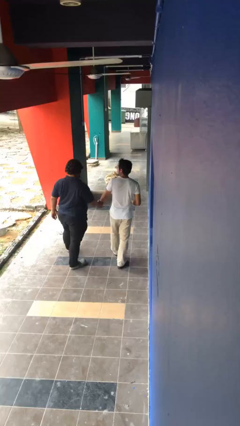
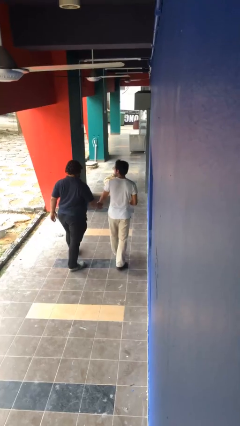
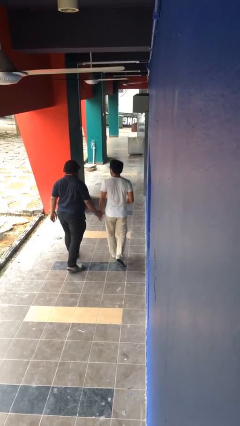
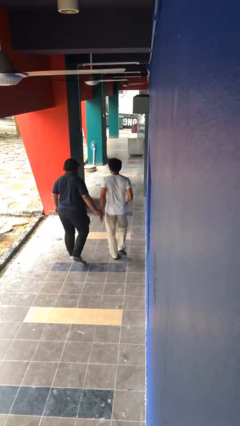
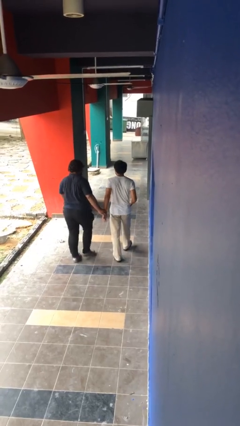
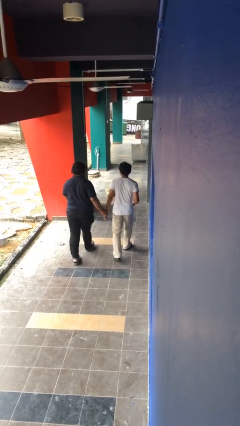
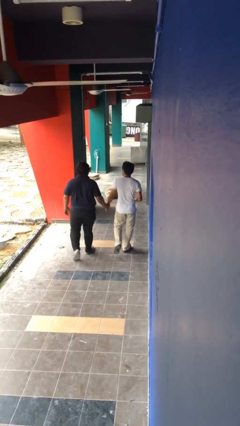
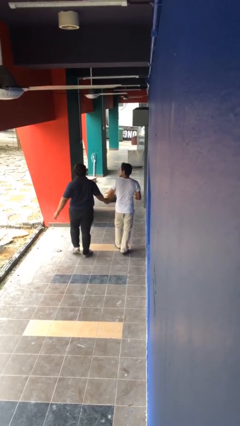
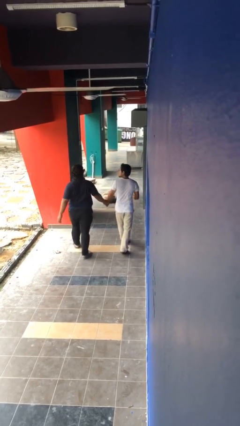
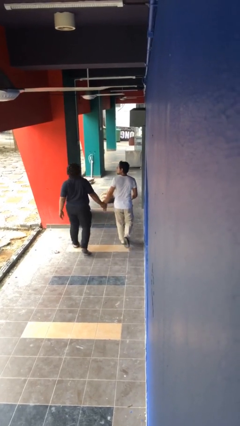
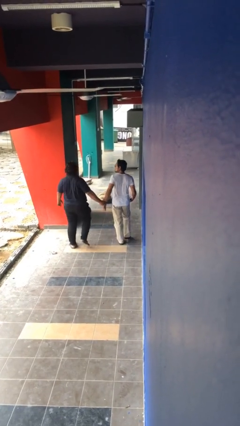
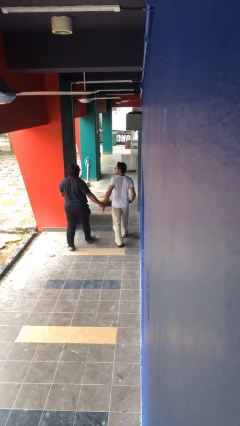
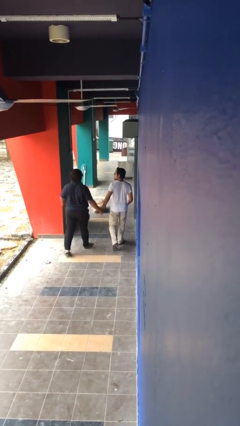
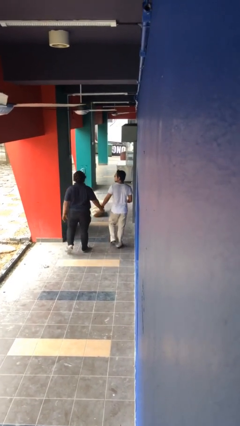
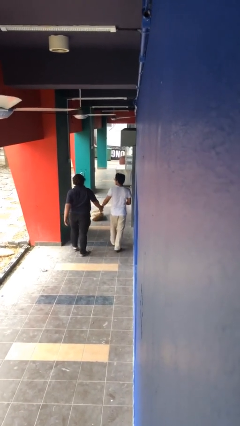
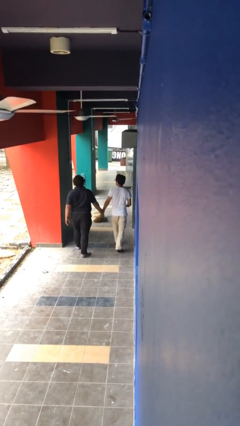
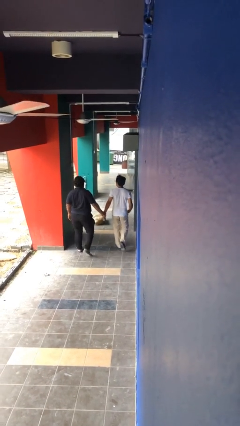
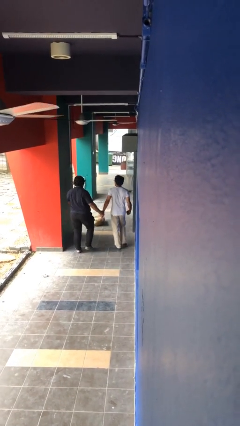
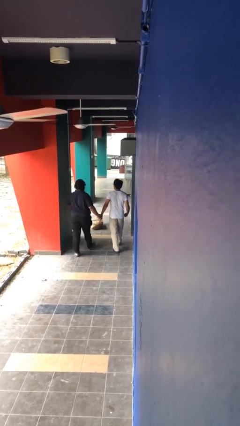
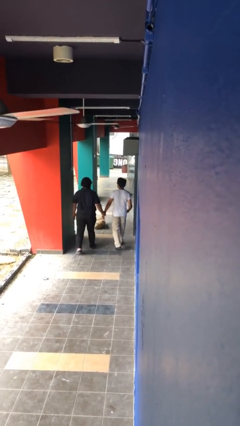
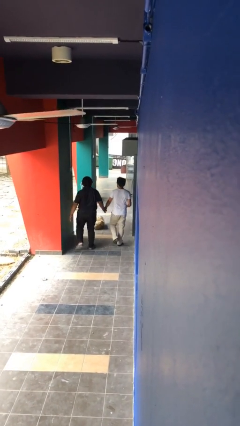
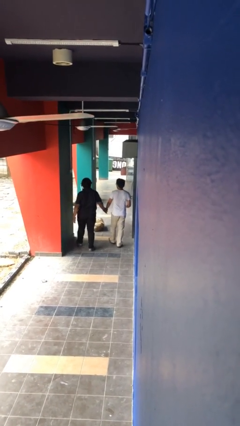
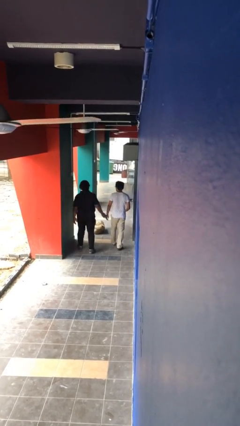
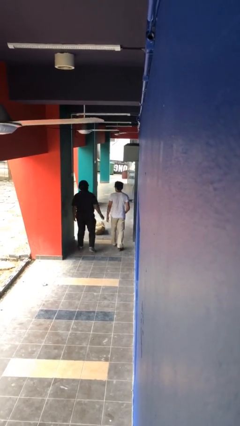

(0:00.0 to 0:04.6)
person holds hand

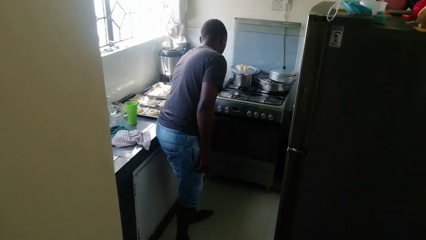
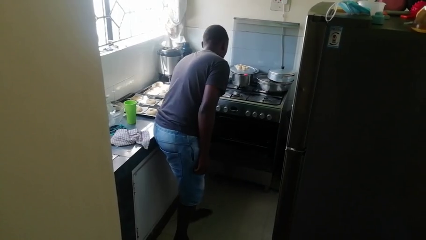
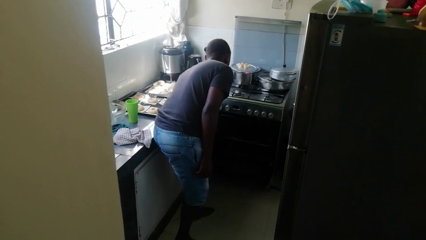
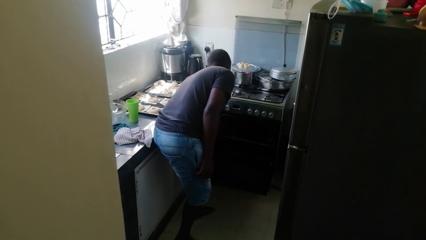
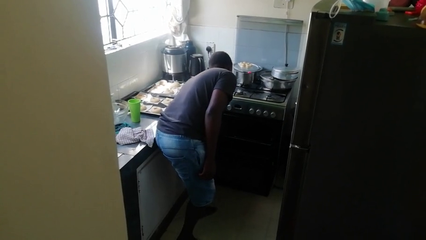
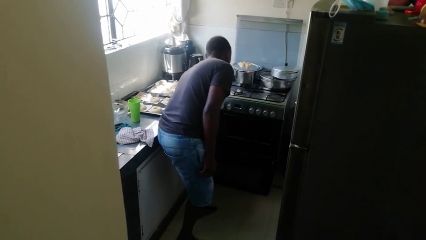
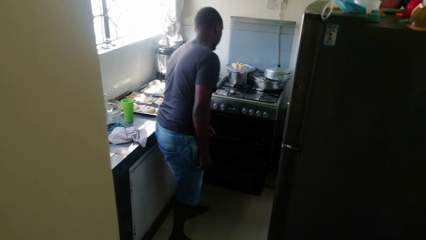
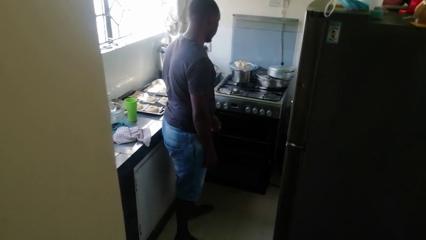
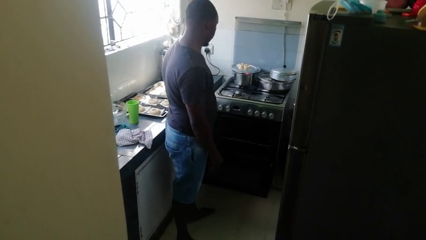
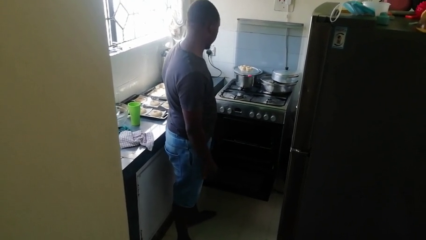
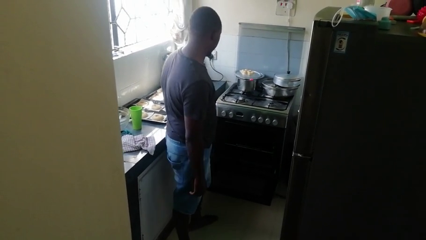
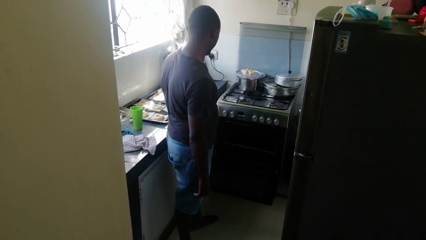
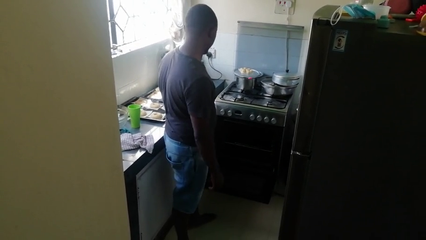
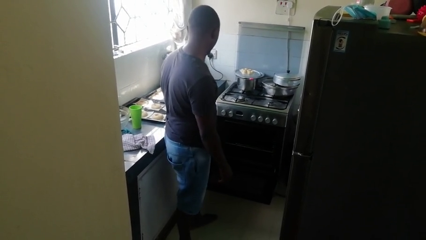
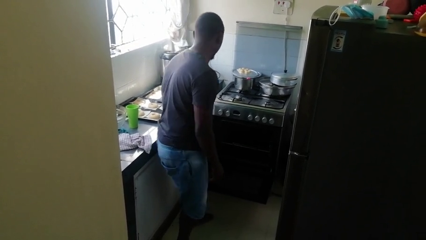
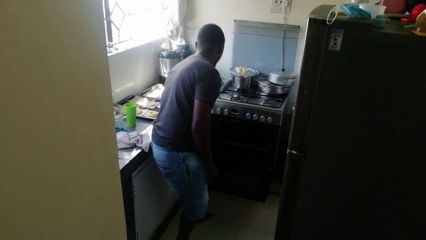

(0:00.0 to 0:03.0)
person opens oven door

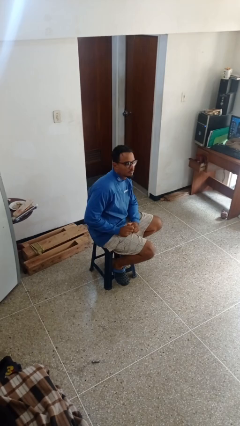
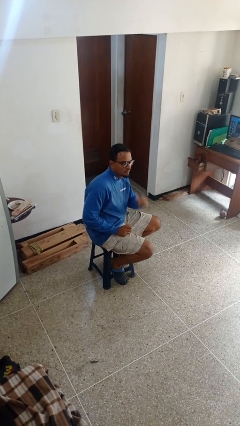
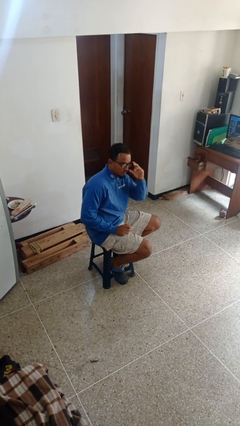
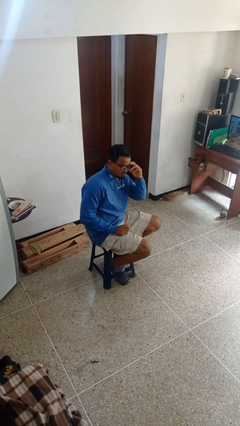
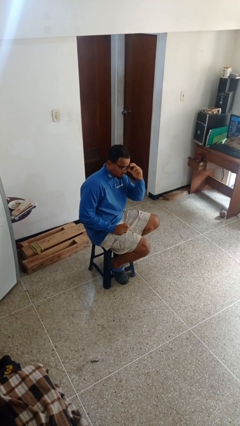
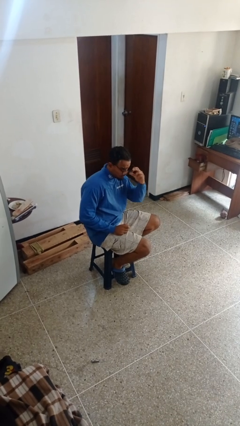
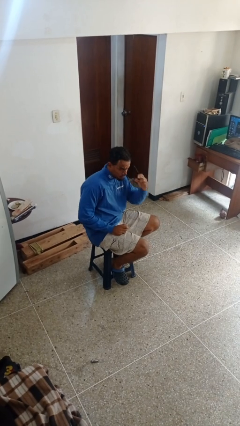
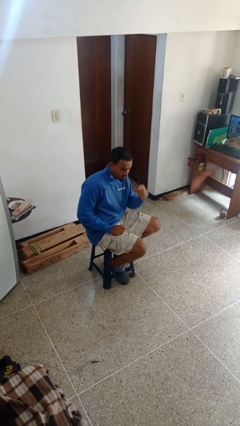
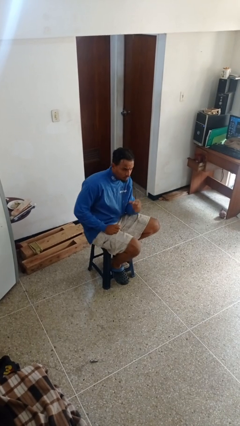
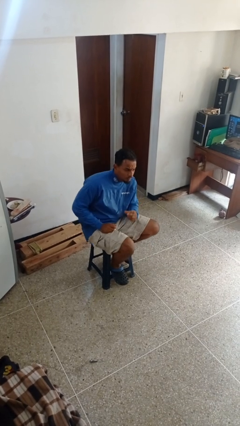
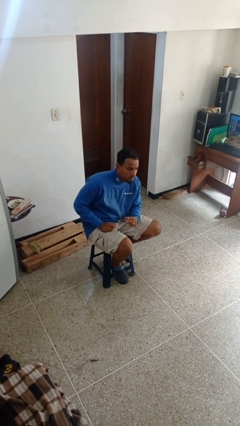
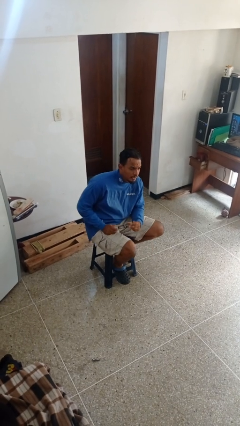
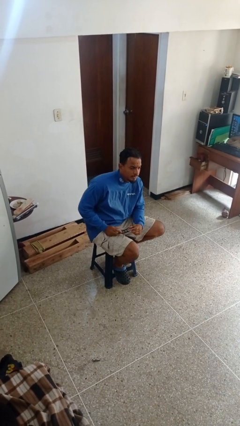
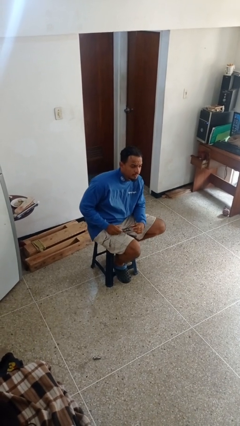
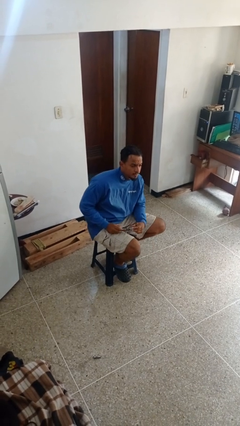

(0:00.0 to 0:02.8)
person takes off glasses

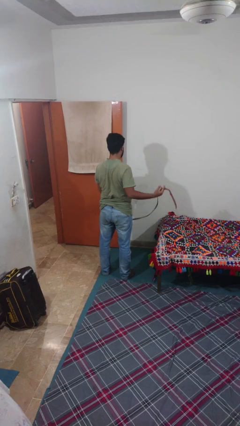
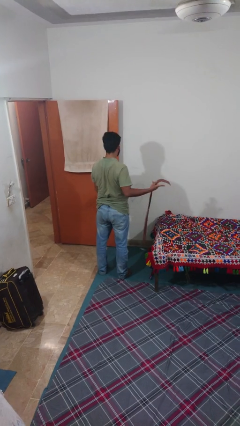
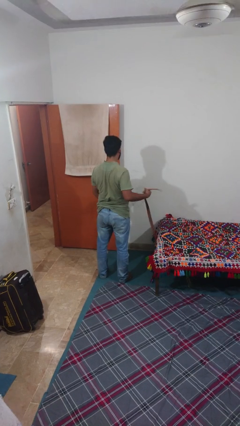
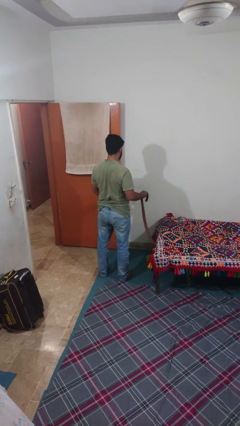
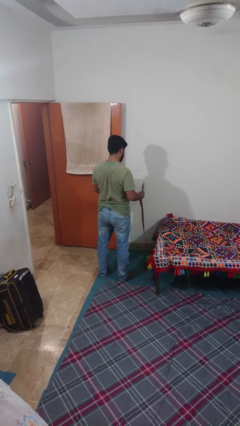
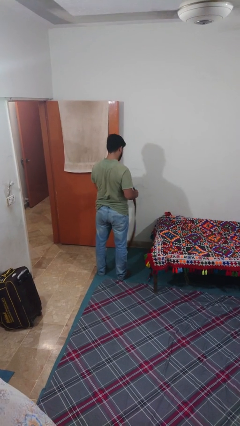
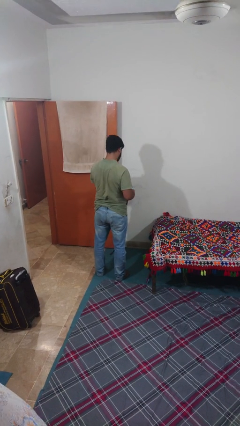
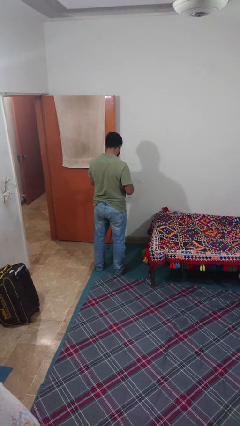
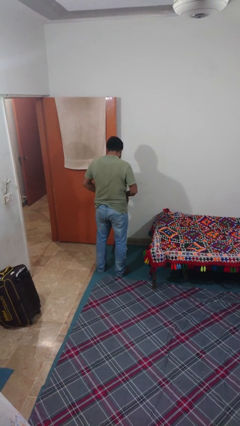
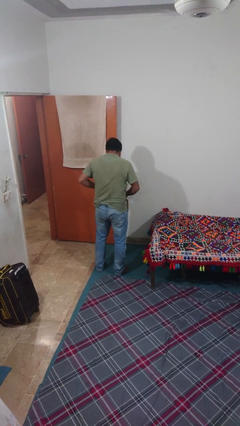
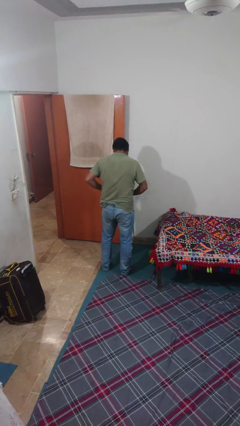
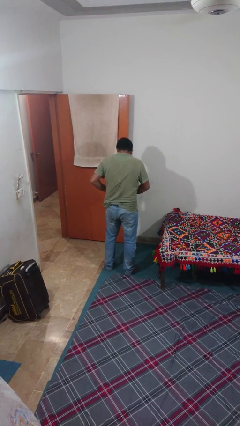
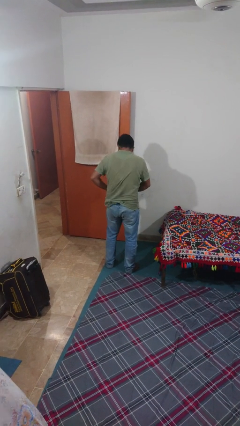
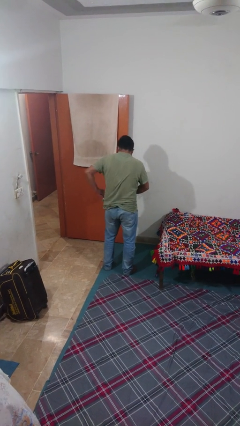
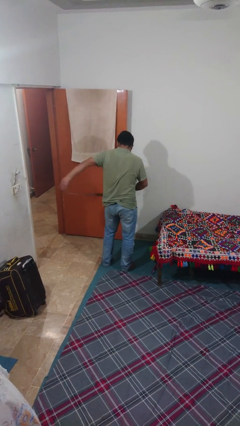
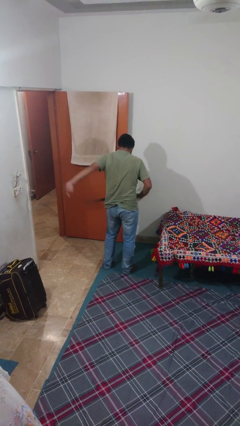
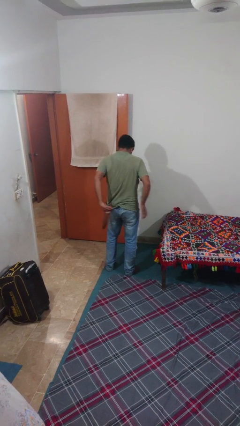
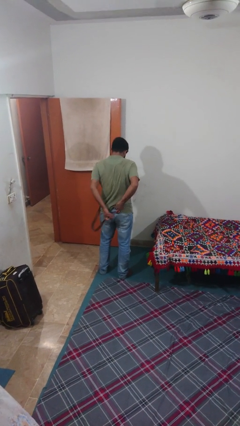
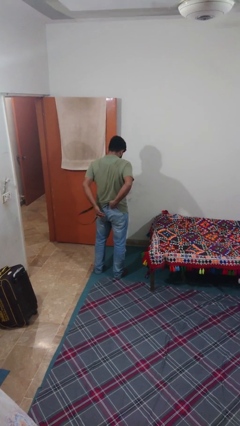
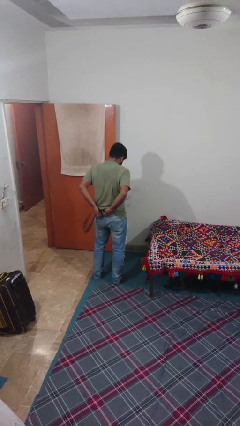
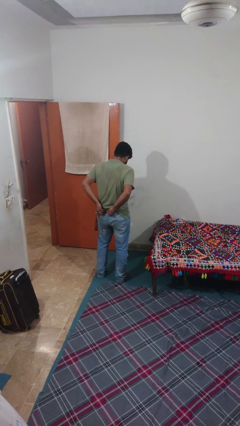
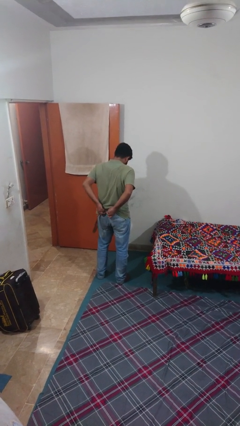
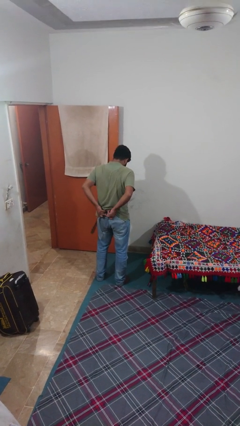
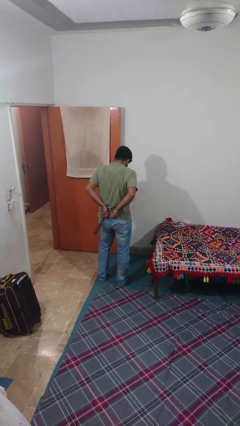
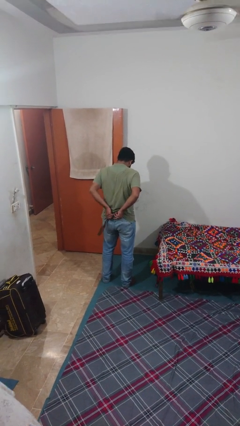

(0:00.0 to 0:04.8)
person puts on belt

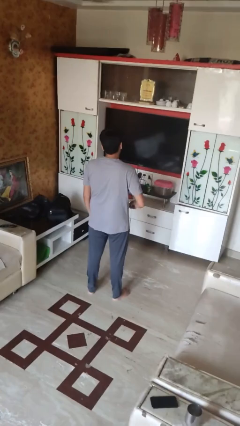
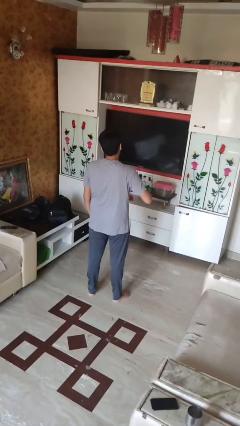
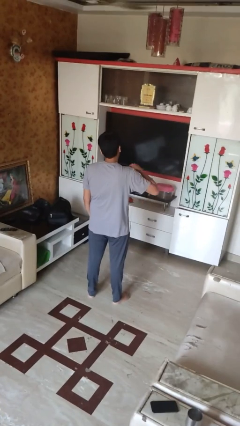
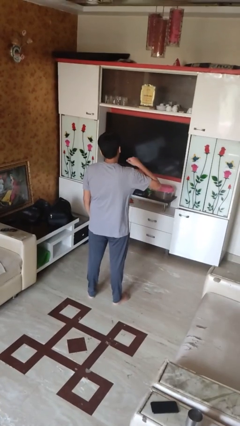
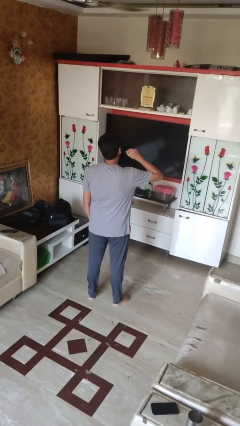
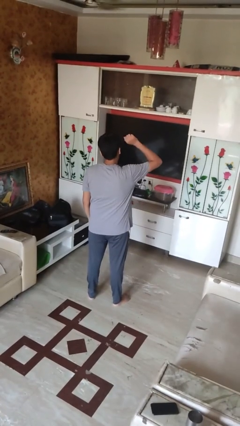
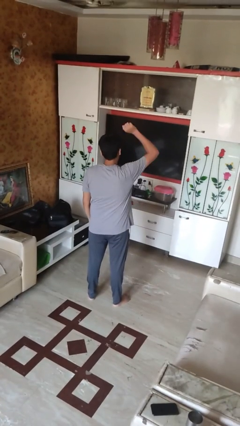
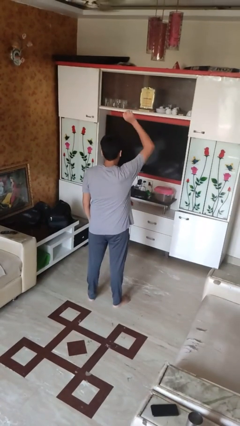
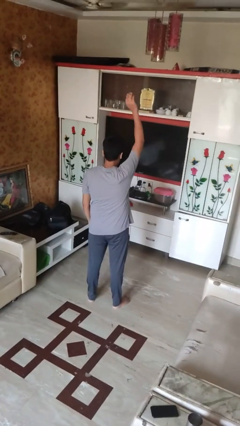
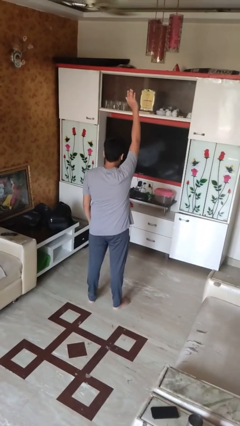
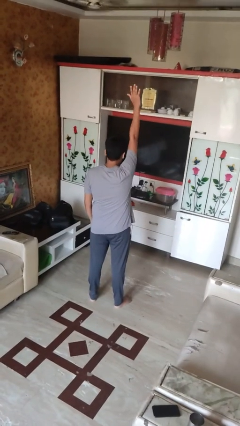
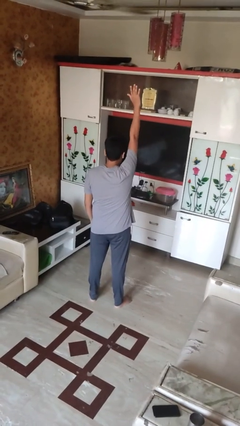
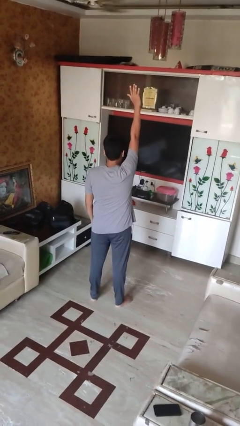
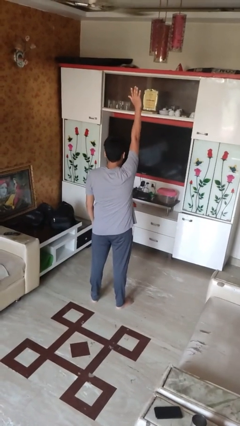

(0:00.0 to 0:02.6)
person gestures raise hand
